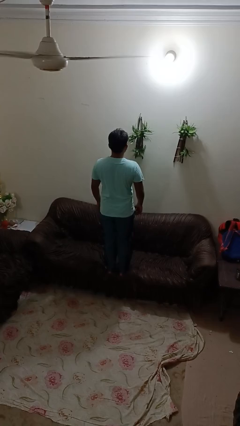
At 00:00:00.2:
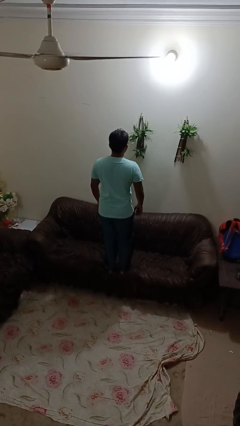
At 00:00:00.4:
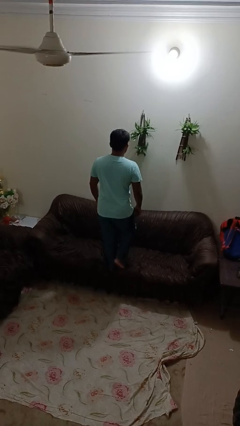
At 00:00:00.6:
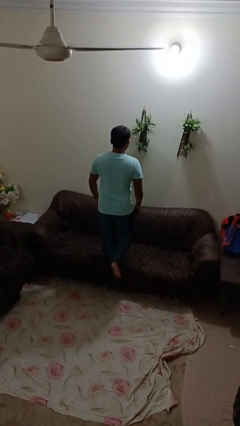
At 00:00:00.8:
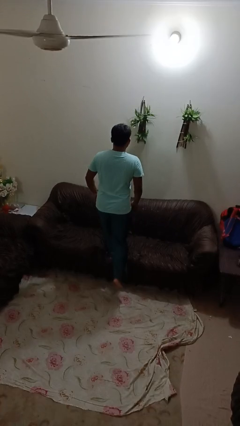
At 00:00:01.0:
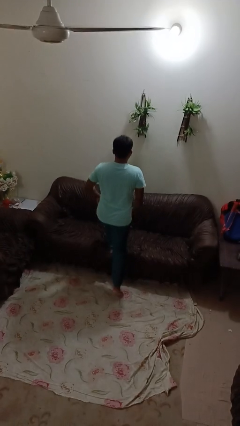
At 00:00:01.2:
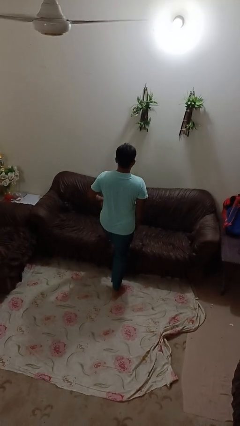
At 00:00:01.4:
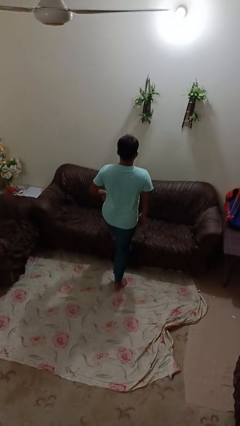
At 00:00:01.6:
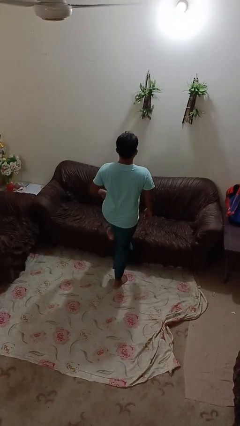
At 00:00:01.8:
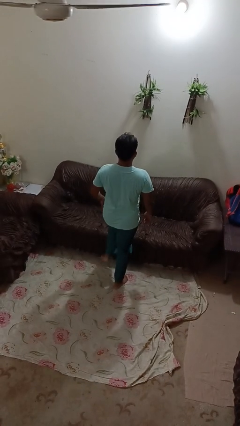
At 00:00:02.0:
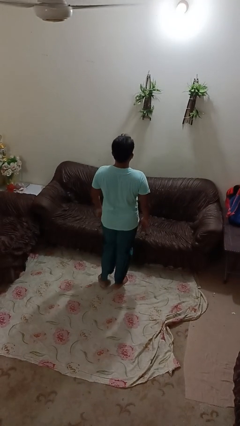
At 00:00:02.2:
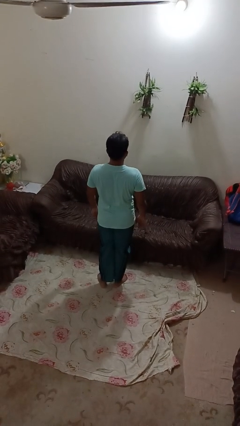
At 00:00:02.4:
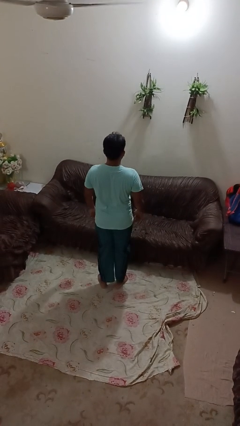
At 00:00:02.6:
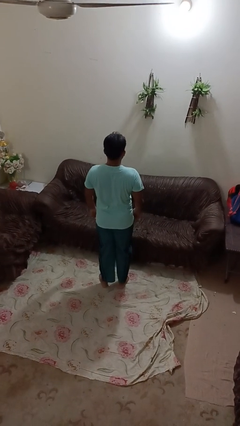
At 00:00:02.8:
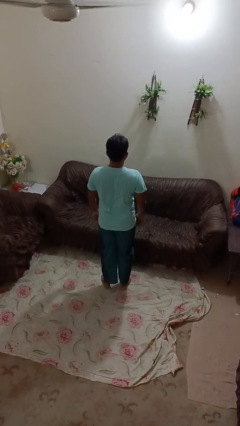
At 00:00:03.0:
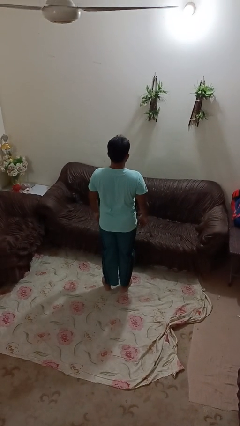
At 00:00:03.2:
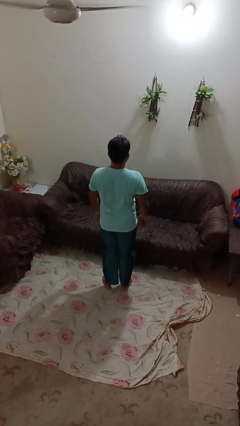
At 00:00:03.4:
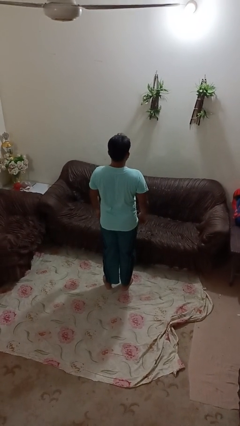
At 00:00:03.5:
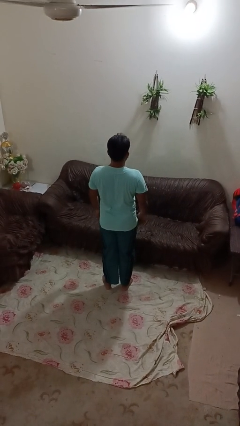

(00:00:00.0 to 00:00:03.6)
person climbs off couch

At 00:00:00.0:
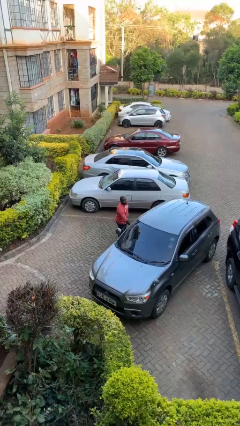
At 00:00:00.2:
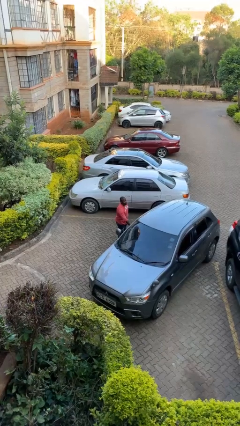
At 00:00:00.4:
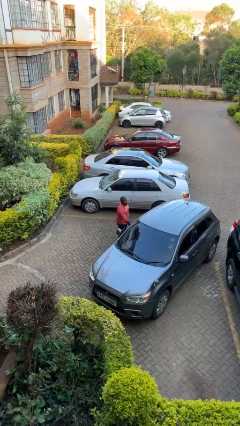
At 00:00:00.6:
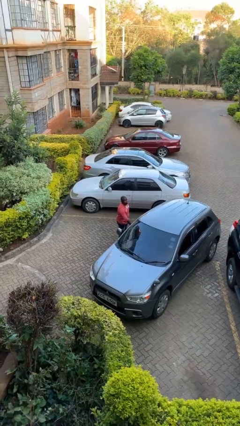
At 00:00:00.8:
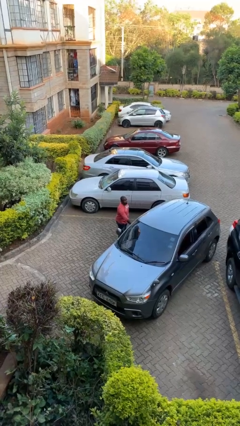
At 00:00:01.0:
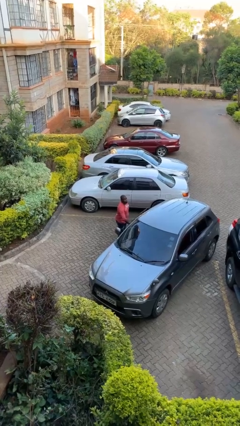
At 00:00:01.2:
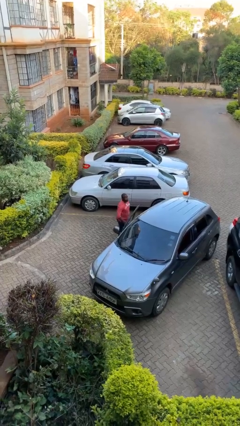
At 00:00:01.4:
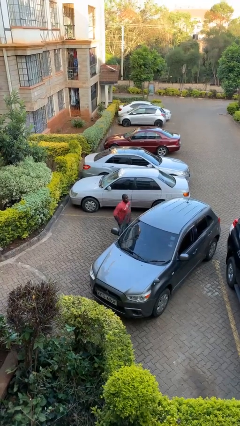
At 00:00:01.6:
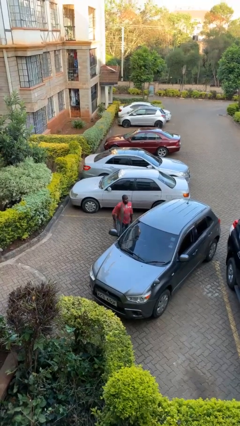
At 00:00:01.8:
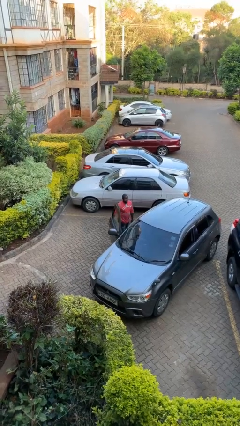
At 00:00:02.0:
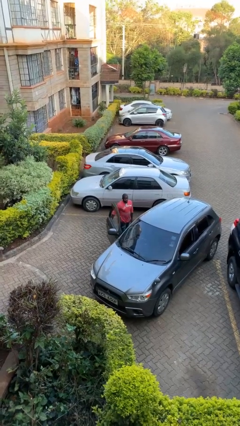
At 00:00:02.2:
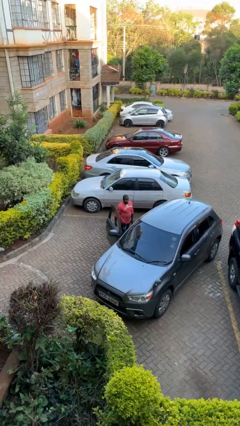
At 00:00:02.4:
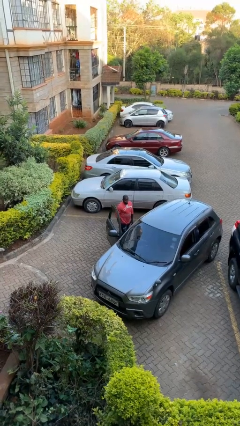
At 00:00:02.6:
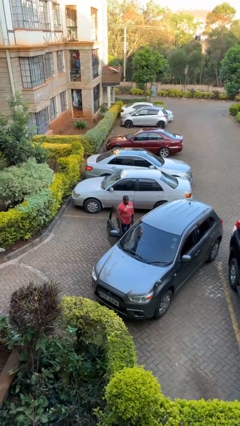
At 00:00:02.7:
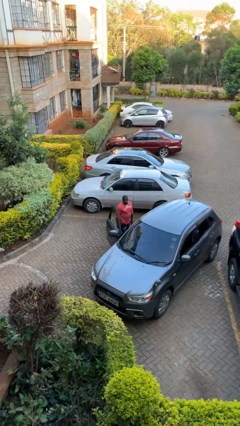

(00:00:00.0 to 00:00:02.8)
person opens car door

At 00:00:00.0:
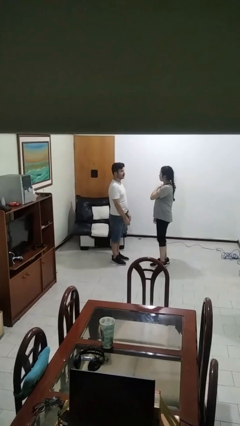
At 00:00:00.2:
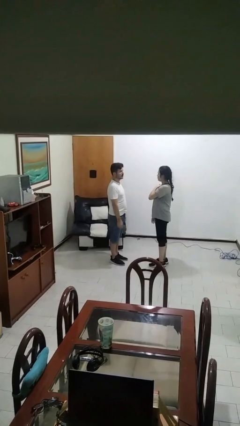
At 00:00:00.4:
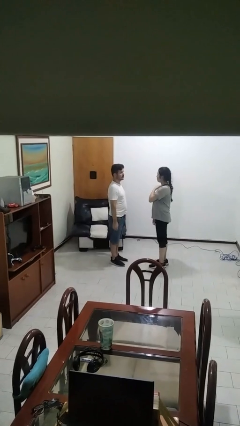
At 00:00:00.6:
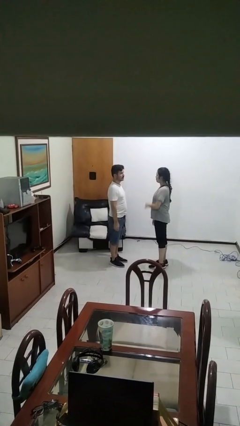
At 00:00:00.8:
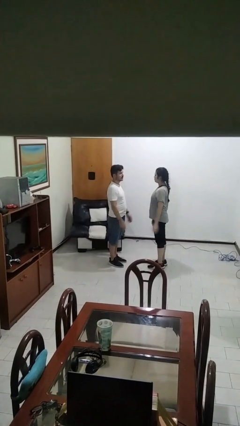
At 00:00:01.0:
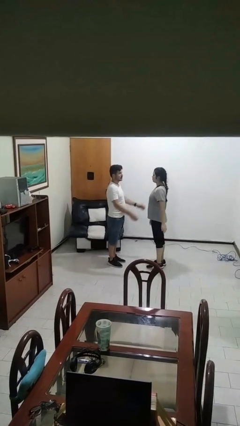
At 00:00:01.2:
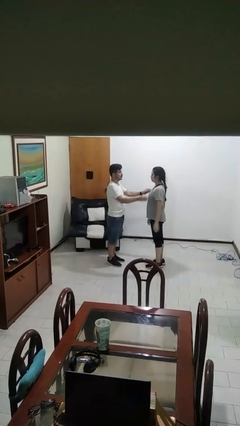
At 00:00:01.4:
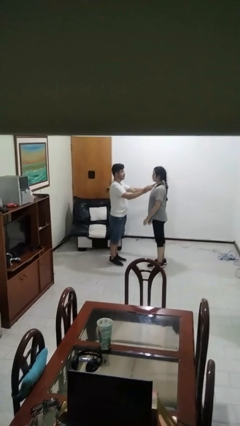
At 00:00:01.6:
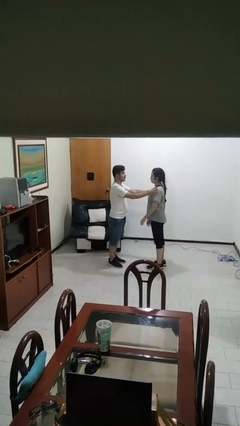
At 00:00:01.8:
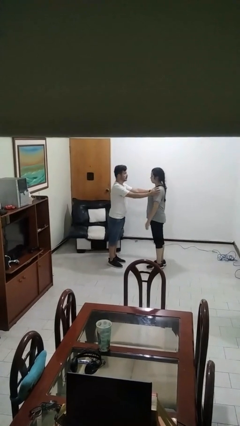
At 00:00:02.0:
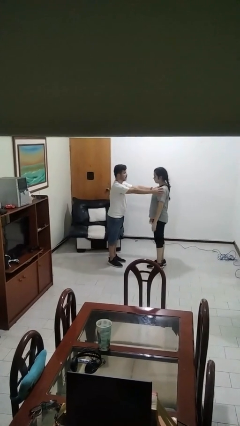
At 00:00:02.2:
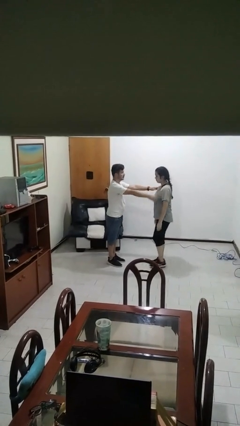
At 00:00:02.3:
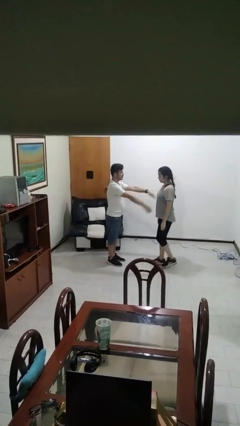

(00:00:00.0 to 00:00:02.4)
person shoves person

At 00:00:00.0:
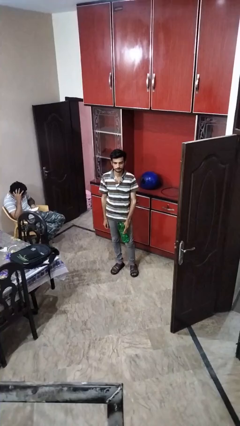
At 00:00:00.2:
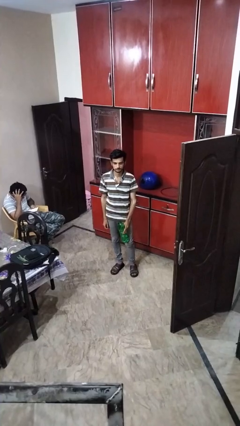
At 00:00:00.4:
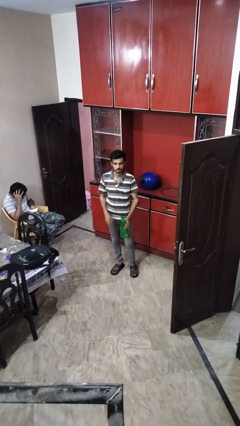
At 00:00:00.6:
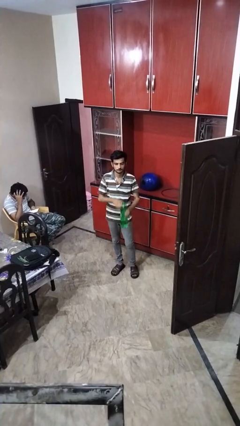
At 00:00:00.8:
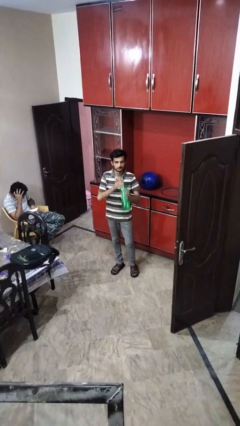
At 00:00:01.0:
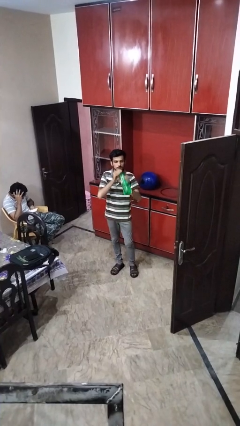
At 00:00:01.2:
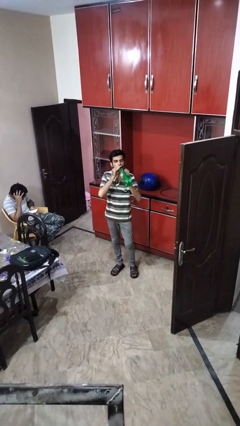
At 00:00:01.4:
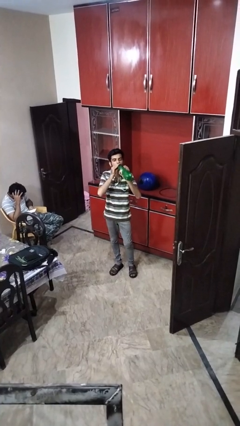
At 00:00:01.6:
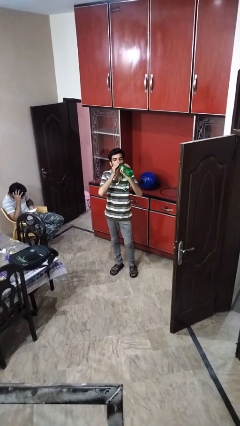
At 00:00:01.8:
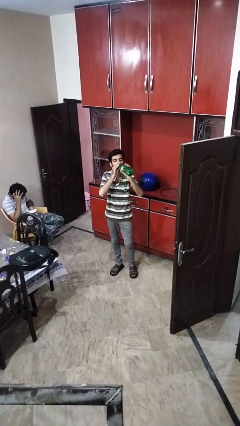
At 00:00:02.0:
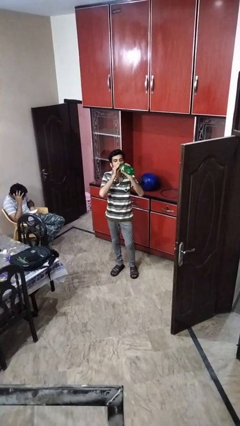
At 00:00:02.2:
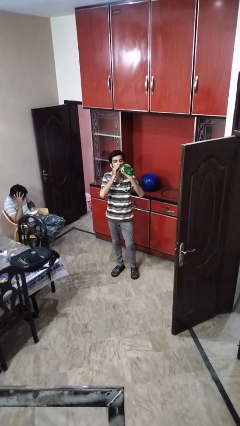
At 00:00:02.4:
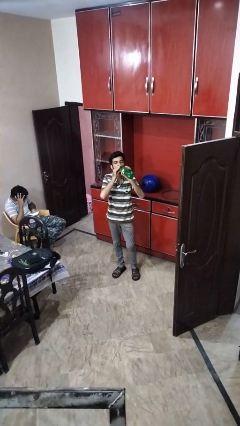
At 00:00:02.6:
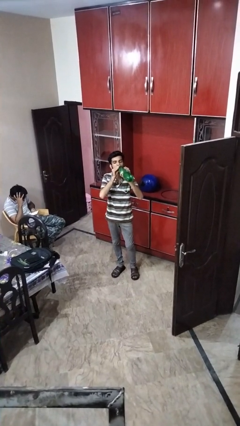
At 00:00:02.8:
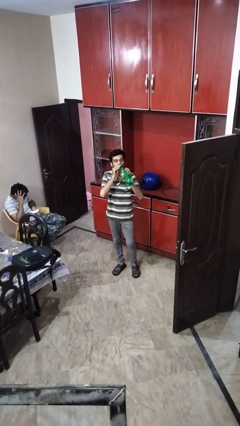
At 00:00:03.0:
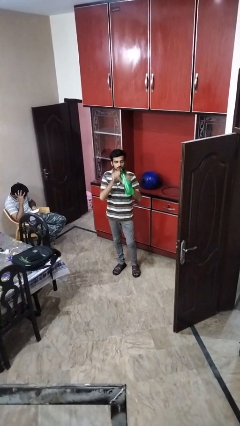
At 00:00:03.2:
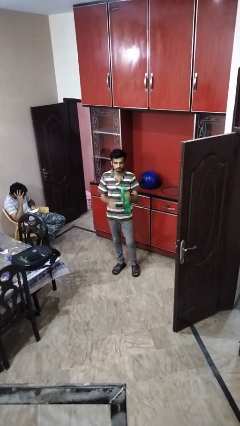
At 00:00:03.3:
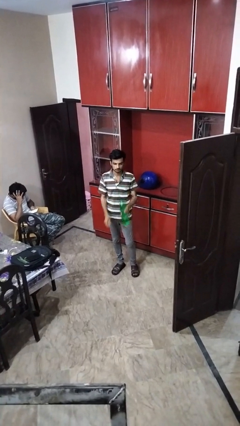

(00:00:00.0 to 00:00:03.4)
person drinks from bottle

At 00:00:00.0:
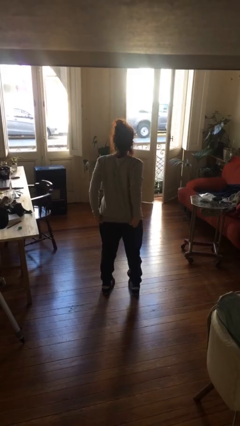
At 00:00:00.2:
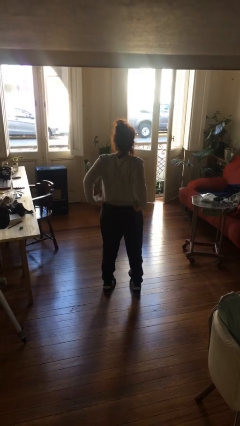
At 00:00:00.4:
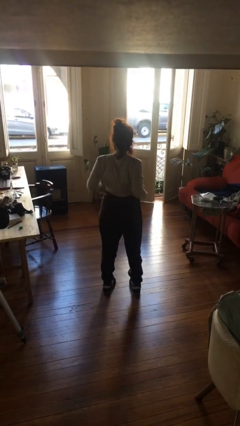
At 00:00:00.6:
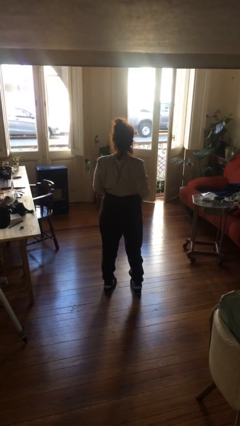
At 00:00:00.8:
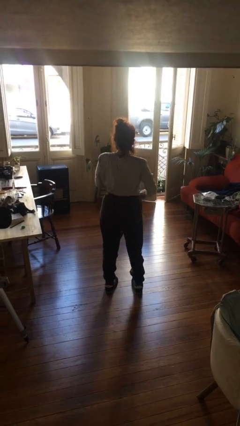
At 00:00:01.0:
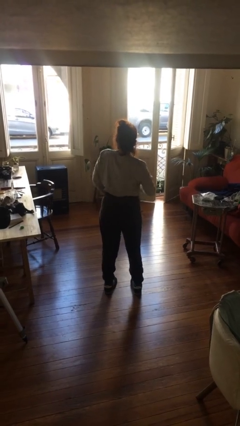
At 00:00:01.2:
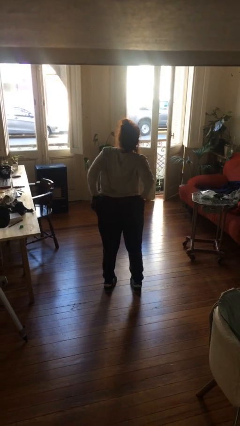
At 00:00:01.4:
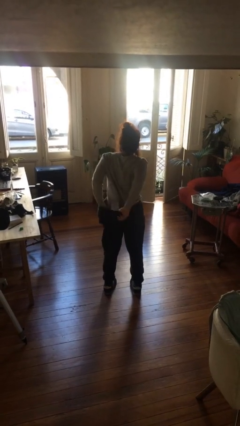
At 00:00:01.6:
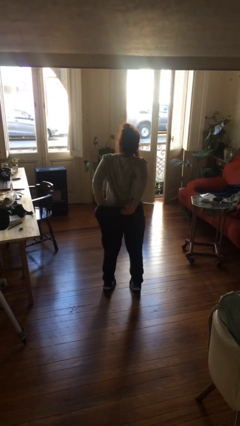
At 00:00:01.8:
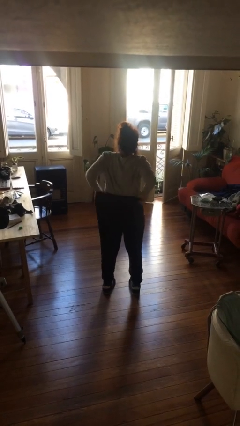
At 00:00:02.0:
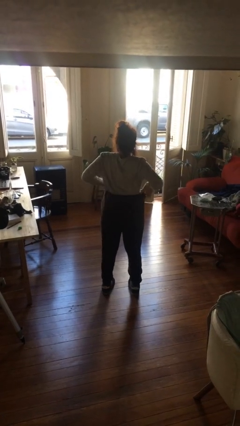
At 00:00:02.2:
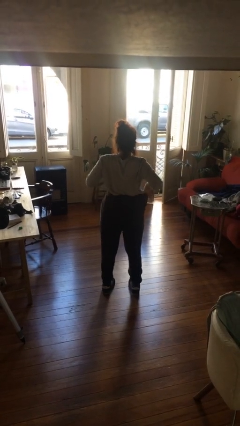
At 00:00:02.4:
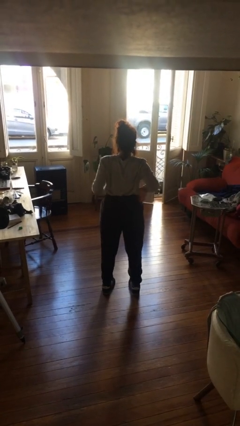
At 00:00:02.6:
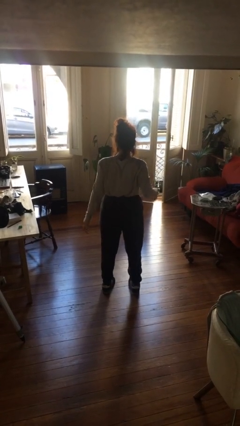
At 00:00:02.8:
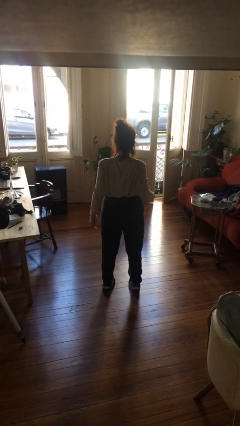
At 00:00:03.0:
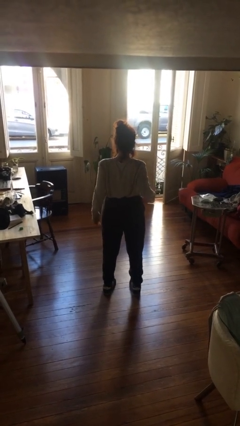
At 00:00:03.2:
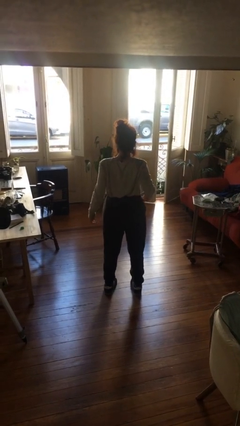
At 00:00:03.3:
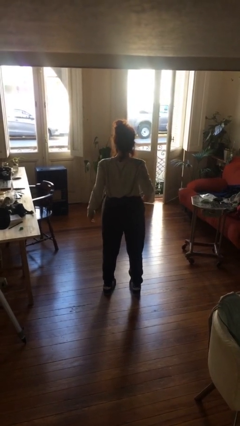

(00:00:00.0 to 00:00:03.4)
person tucks in shirt

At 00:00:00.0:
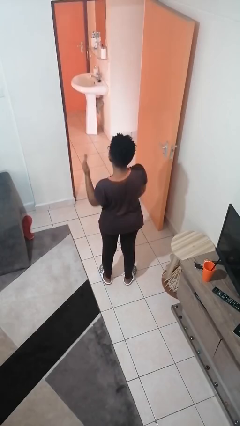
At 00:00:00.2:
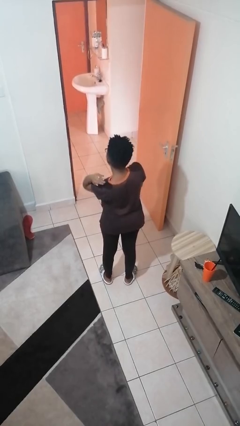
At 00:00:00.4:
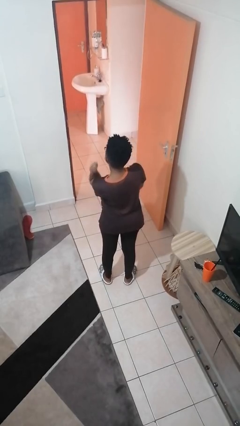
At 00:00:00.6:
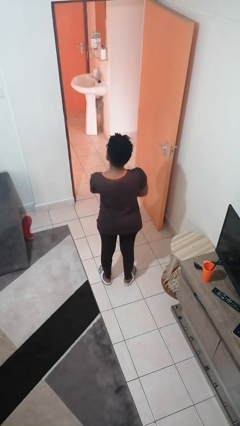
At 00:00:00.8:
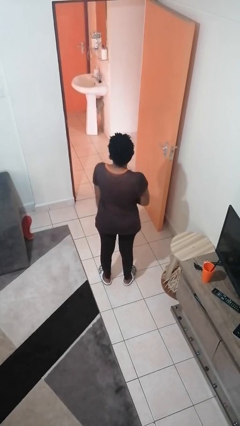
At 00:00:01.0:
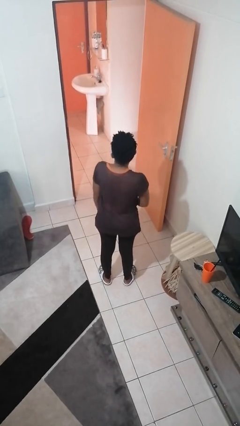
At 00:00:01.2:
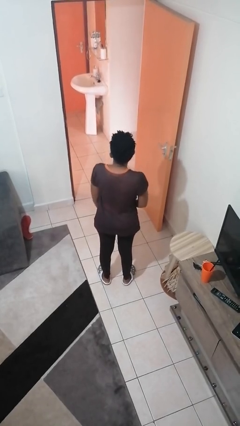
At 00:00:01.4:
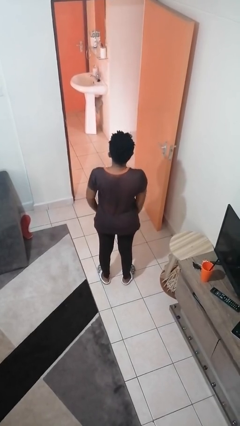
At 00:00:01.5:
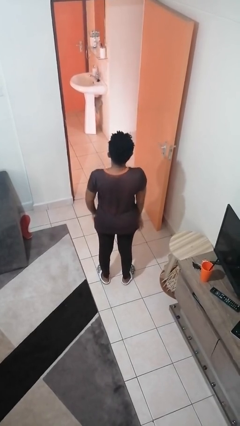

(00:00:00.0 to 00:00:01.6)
person karate chop
